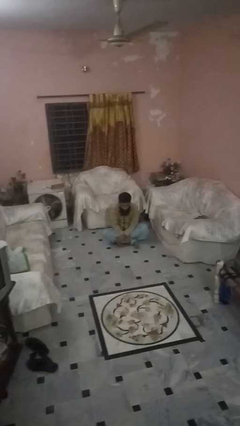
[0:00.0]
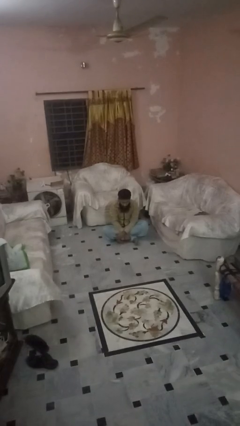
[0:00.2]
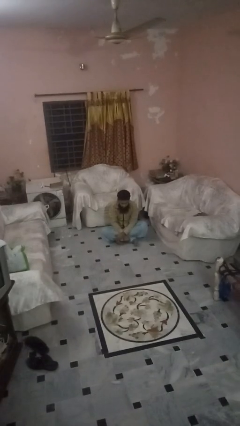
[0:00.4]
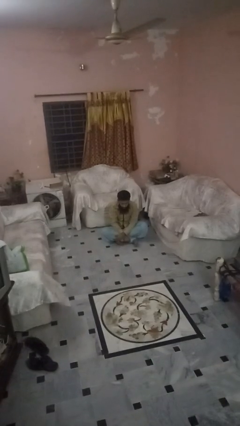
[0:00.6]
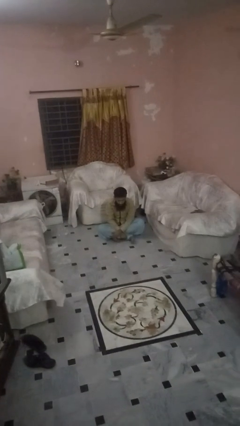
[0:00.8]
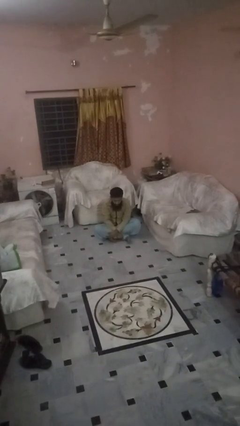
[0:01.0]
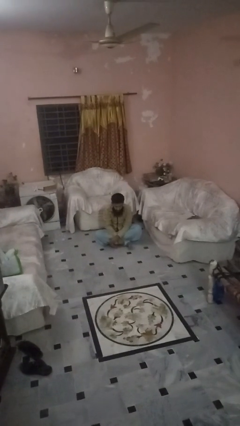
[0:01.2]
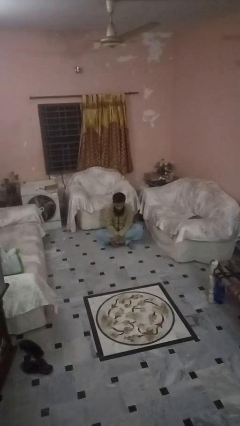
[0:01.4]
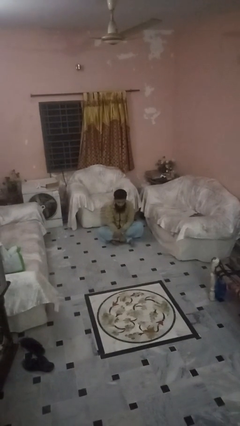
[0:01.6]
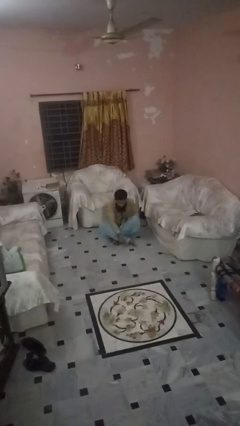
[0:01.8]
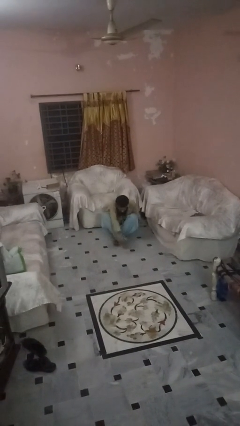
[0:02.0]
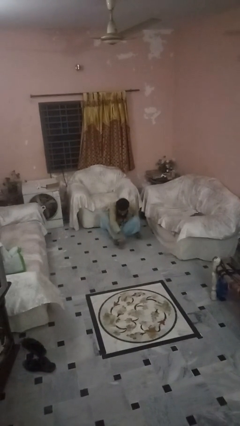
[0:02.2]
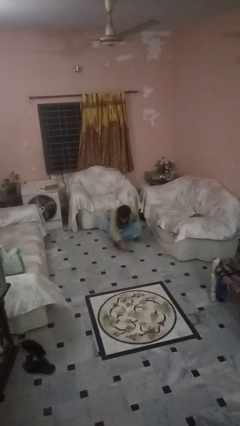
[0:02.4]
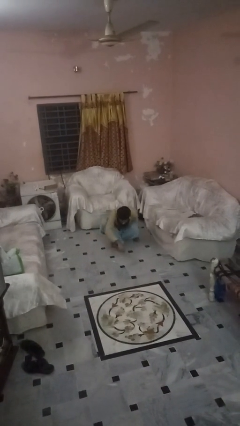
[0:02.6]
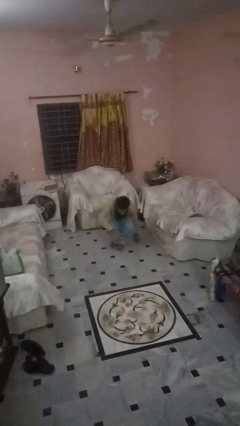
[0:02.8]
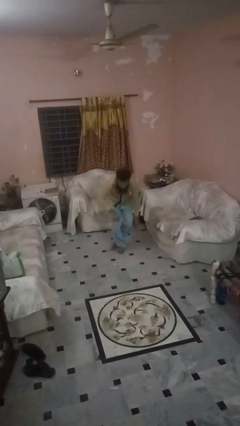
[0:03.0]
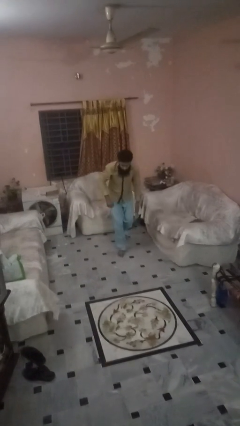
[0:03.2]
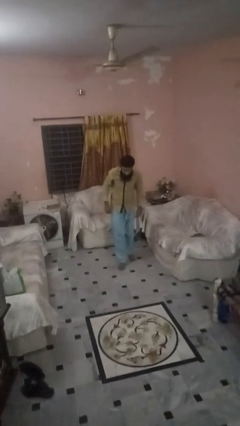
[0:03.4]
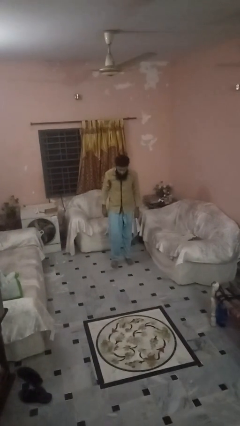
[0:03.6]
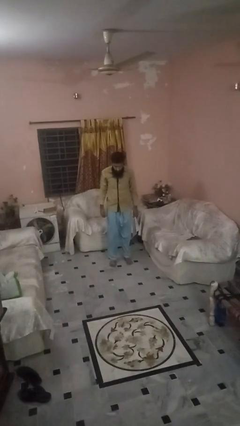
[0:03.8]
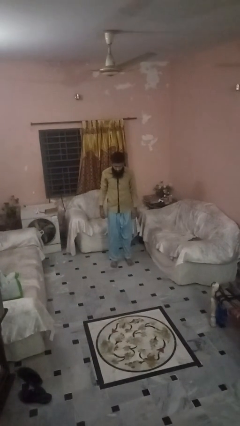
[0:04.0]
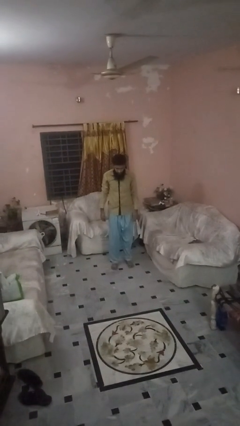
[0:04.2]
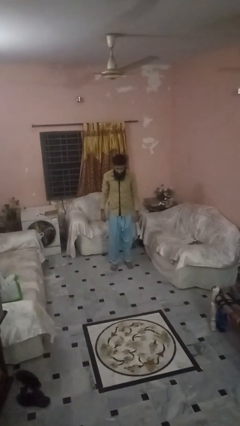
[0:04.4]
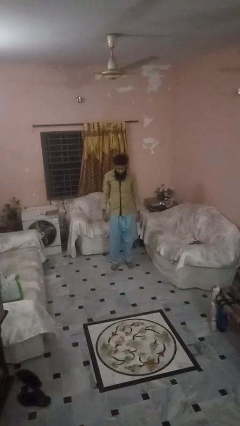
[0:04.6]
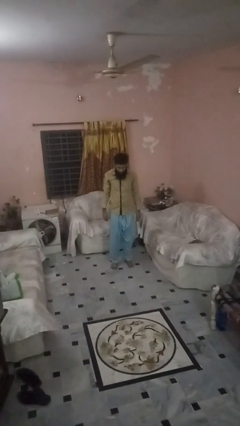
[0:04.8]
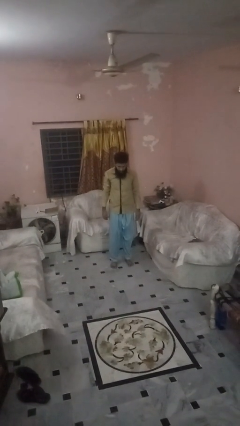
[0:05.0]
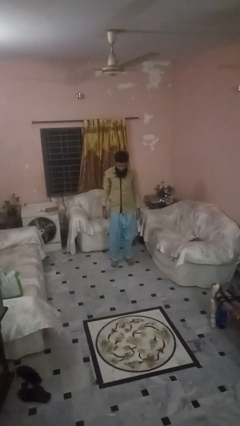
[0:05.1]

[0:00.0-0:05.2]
person stands up from floor

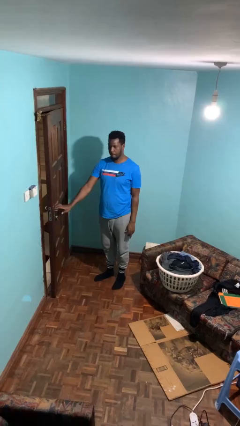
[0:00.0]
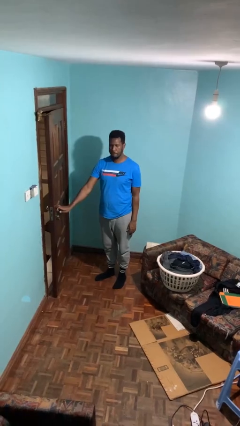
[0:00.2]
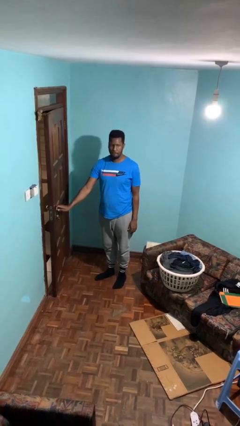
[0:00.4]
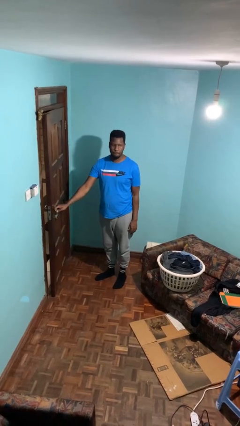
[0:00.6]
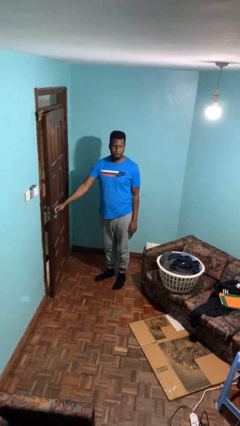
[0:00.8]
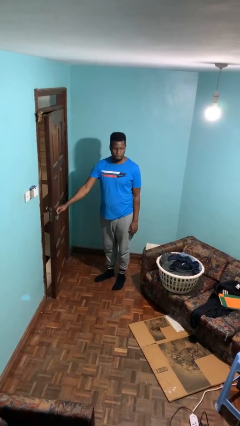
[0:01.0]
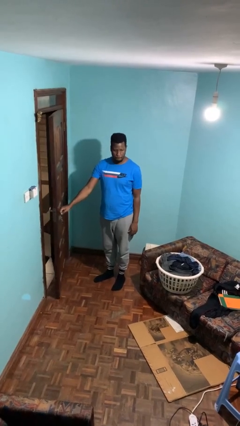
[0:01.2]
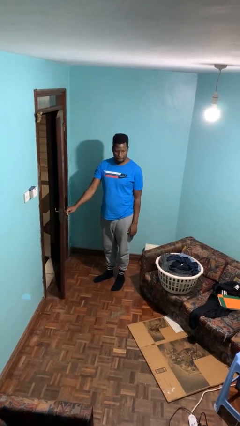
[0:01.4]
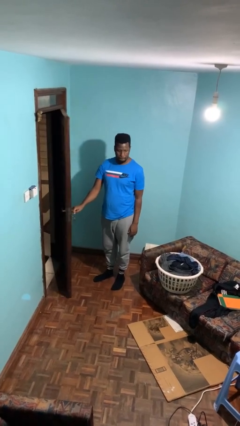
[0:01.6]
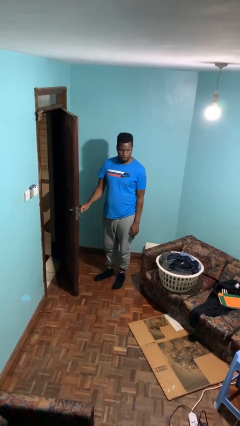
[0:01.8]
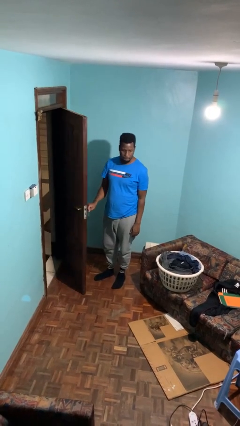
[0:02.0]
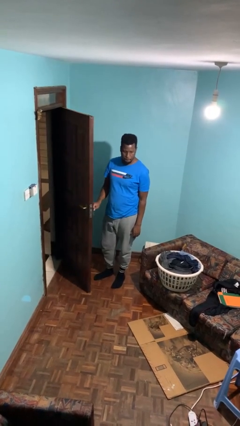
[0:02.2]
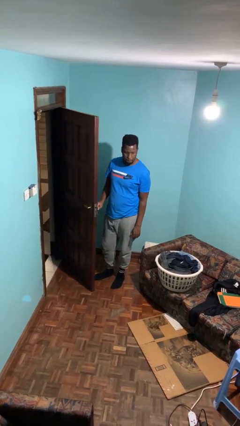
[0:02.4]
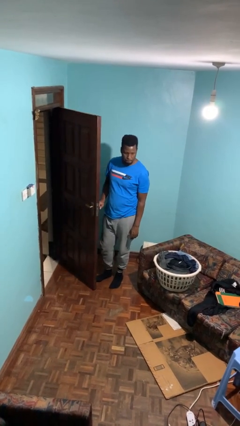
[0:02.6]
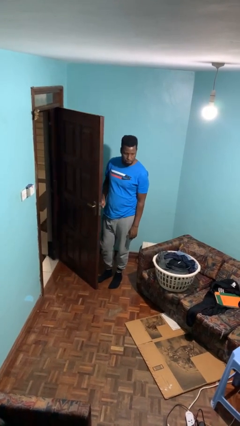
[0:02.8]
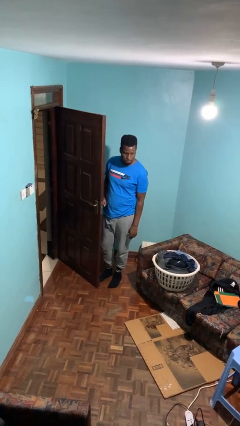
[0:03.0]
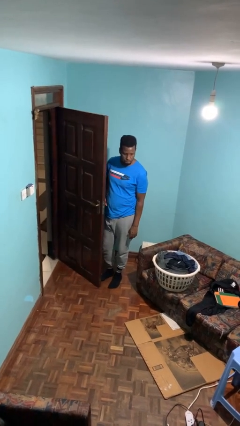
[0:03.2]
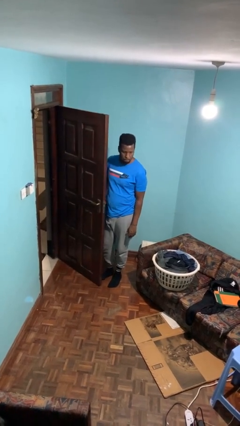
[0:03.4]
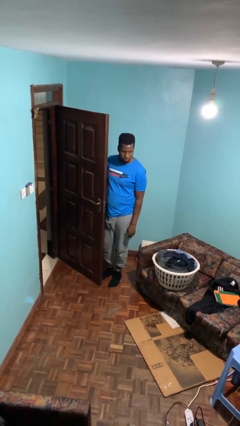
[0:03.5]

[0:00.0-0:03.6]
person opens facility door

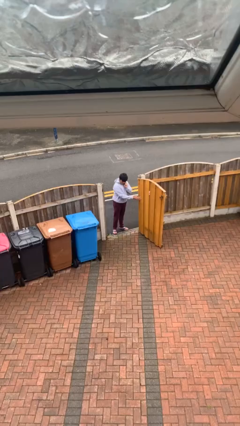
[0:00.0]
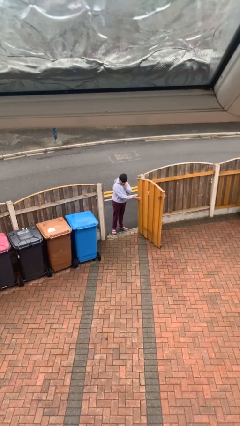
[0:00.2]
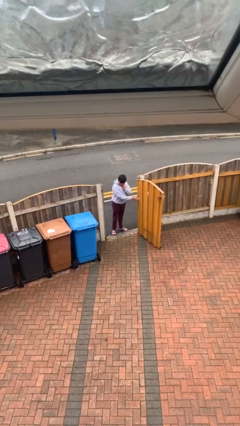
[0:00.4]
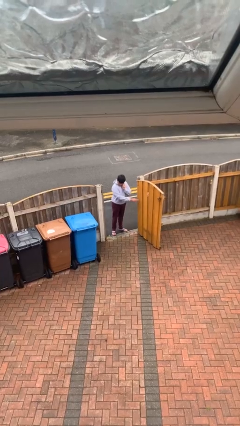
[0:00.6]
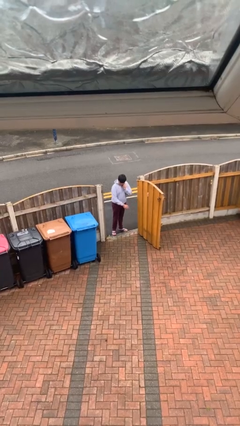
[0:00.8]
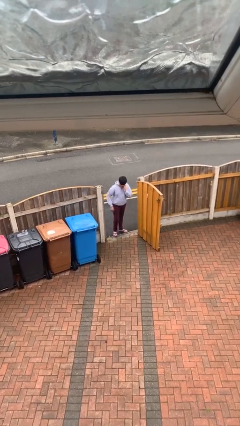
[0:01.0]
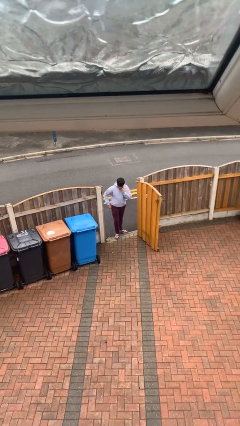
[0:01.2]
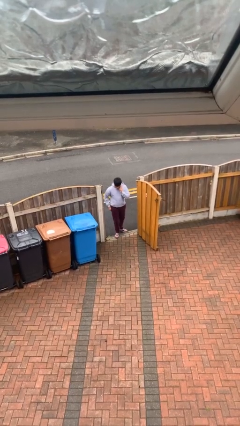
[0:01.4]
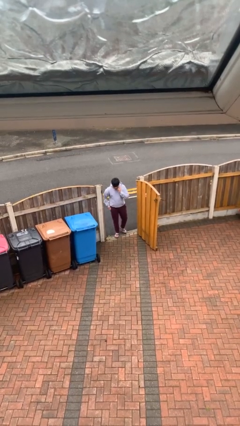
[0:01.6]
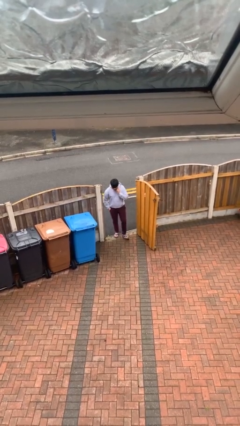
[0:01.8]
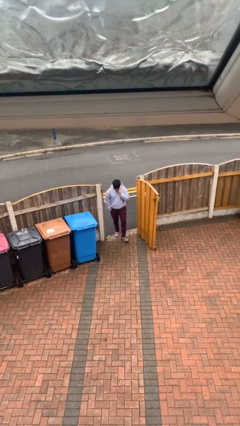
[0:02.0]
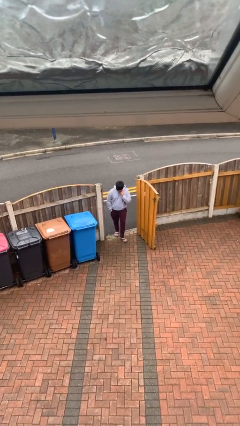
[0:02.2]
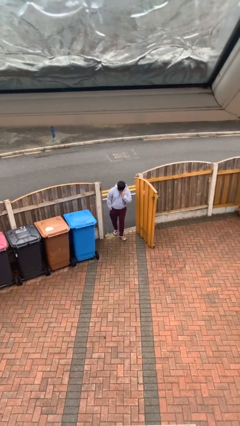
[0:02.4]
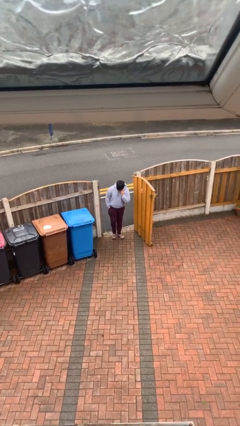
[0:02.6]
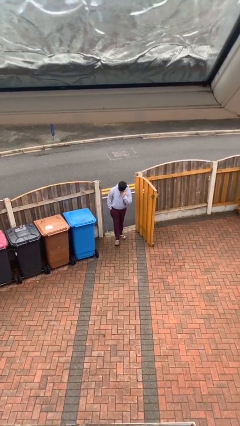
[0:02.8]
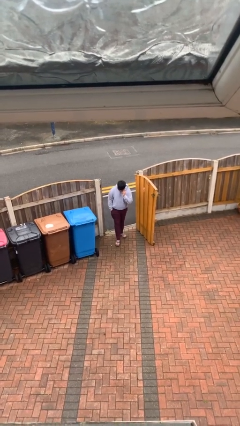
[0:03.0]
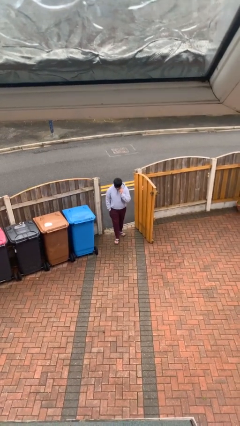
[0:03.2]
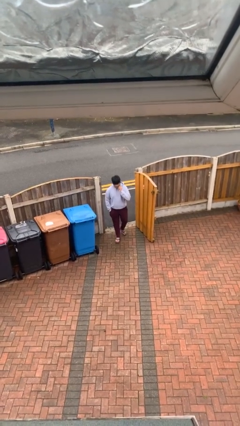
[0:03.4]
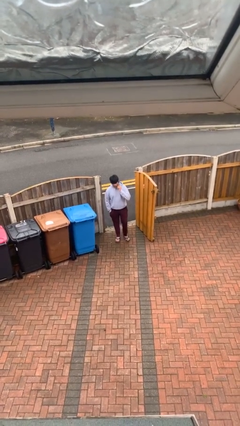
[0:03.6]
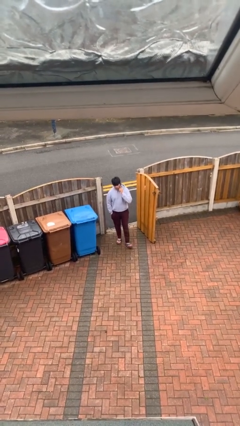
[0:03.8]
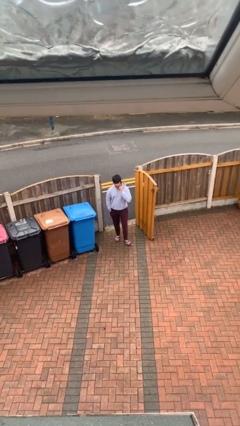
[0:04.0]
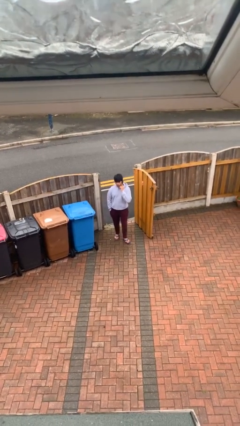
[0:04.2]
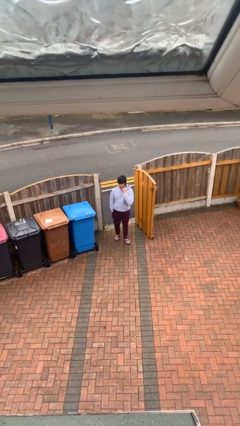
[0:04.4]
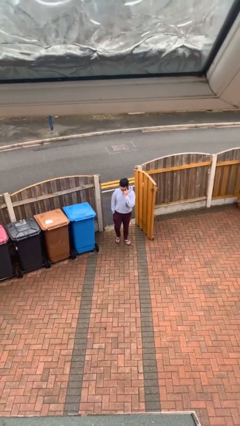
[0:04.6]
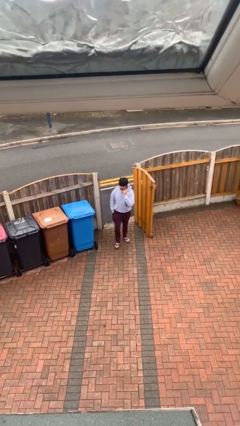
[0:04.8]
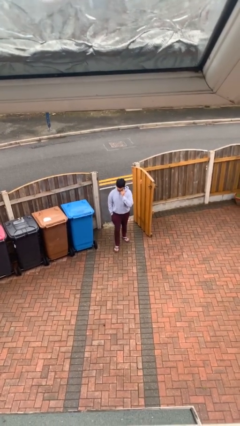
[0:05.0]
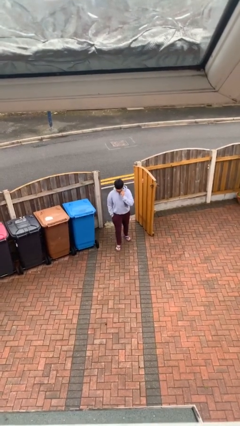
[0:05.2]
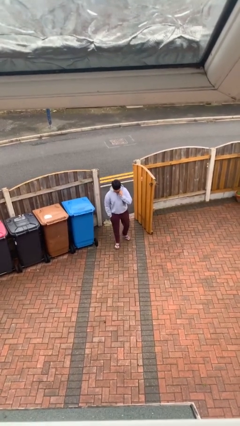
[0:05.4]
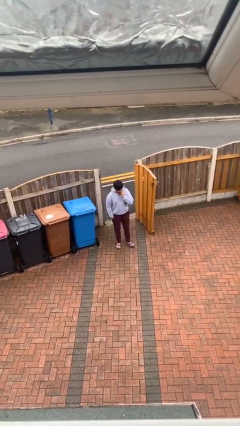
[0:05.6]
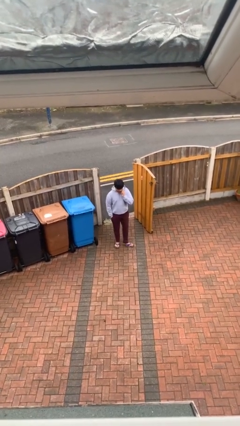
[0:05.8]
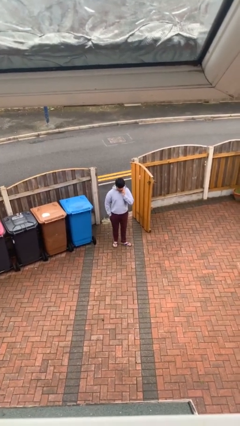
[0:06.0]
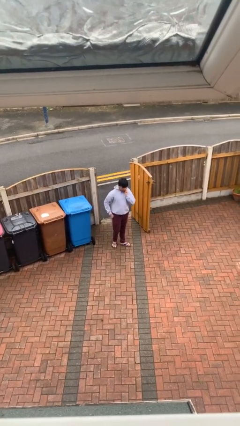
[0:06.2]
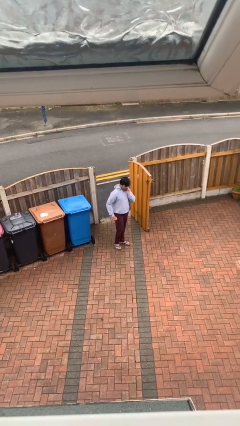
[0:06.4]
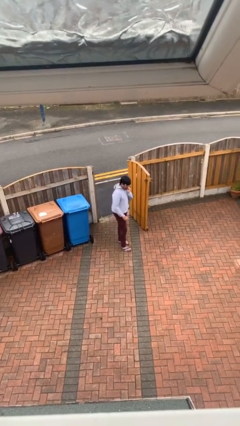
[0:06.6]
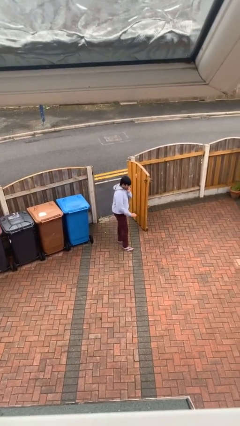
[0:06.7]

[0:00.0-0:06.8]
person enters scene through structure

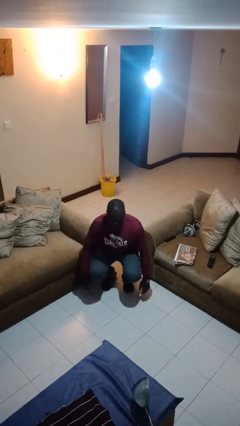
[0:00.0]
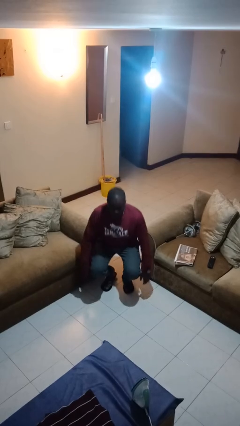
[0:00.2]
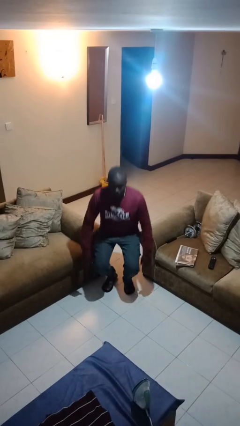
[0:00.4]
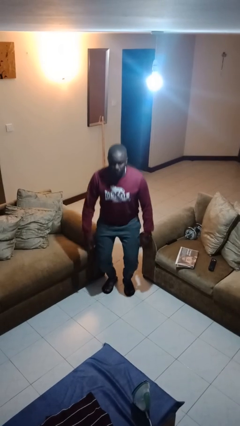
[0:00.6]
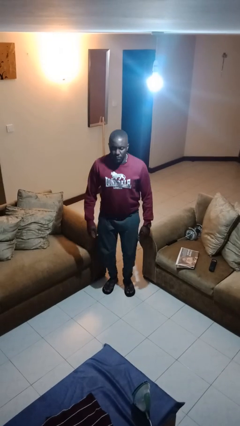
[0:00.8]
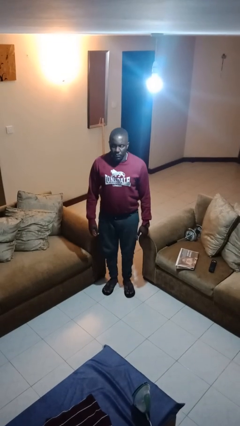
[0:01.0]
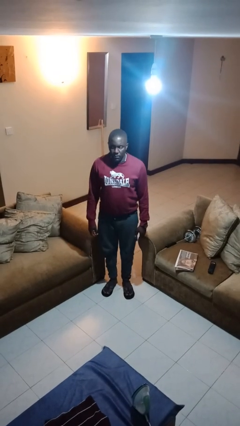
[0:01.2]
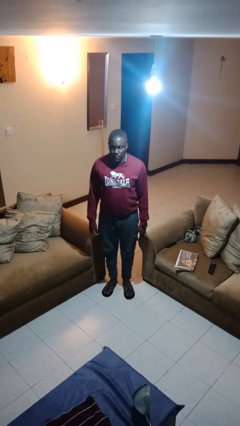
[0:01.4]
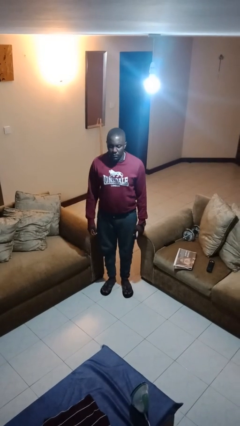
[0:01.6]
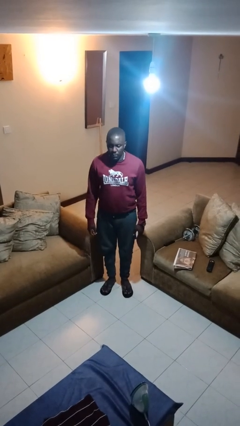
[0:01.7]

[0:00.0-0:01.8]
person stands up

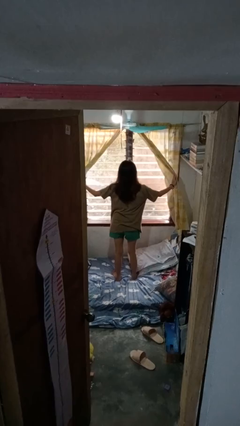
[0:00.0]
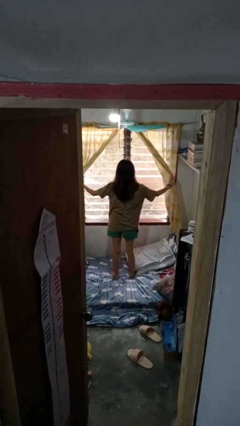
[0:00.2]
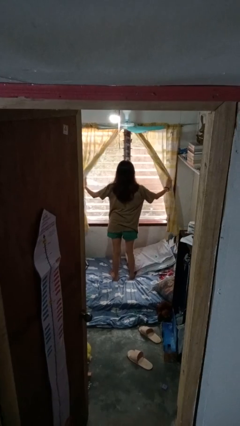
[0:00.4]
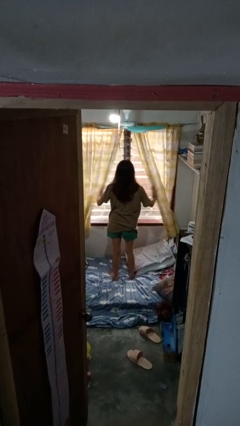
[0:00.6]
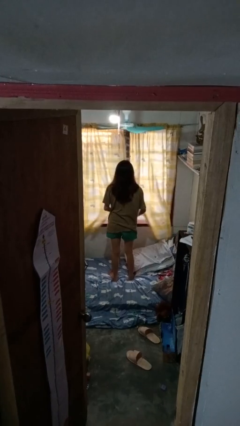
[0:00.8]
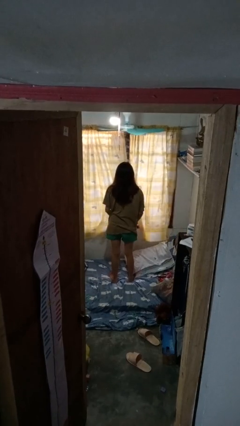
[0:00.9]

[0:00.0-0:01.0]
person closes curtains
